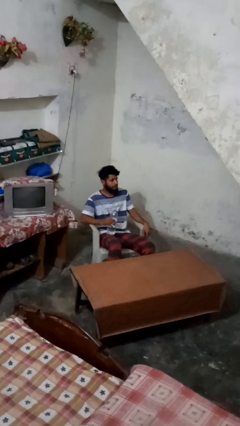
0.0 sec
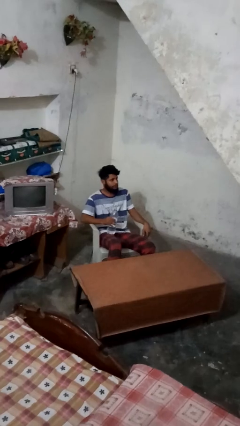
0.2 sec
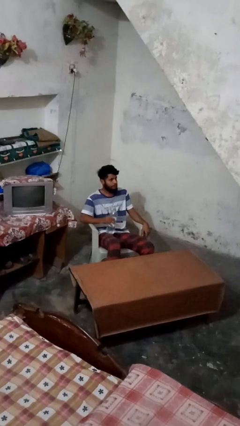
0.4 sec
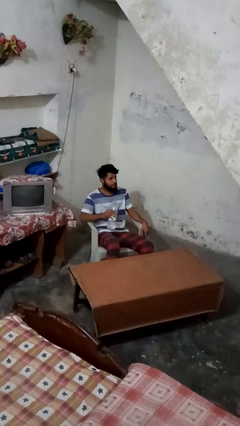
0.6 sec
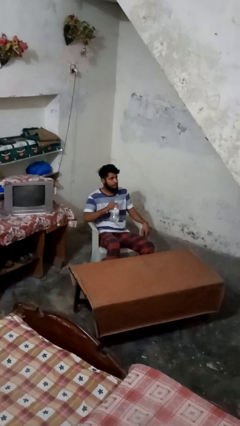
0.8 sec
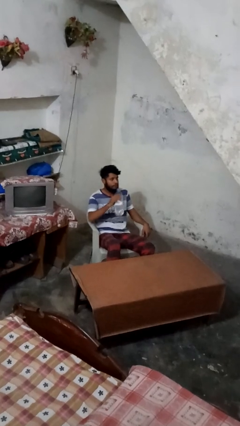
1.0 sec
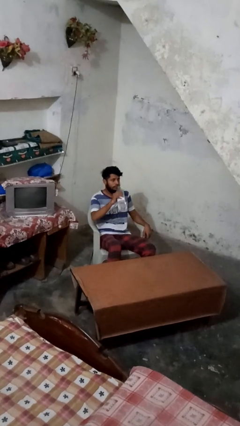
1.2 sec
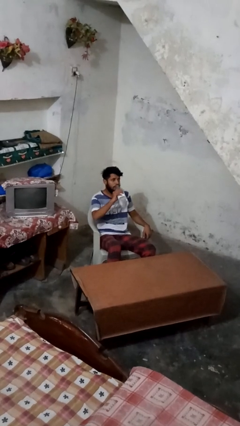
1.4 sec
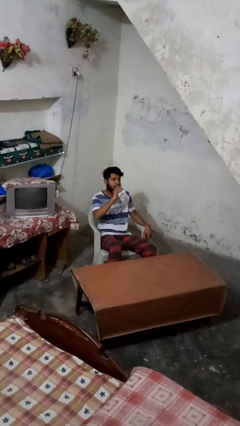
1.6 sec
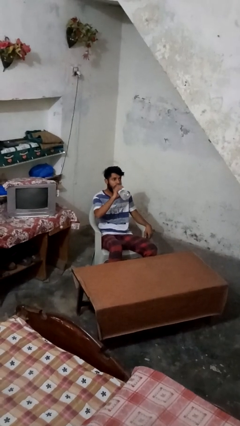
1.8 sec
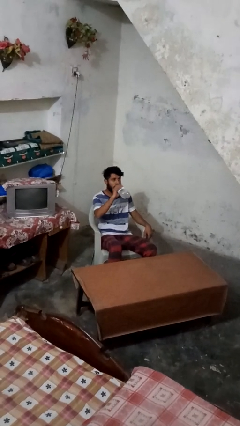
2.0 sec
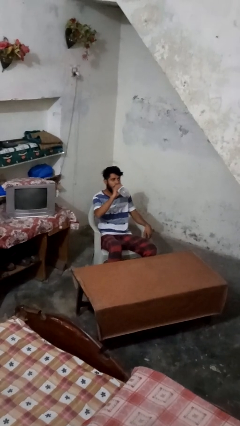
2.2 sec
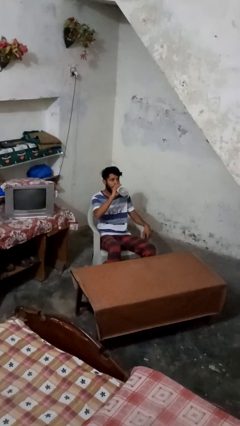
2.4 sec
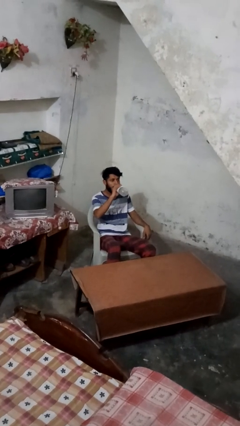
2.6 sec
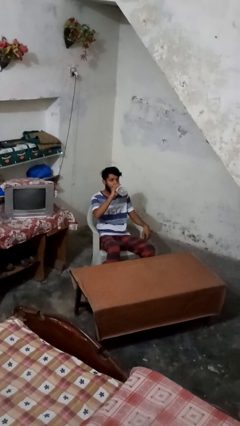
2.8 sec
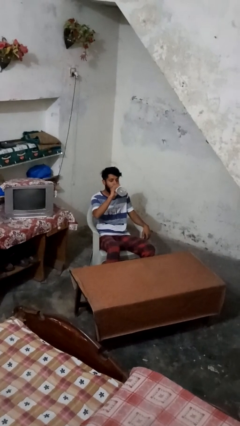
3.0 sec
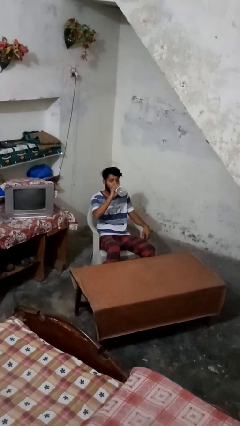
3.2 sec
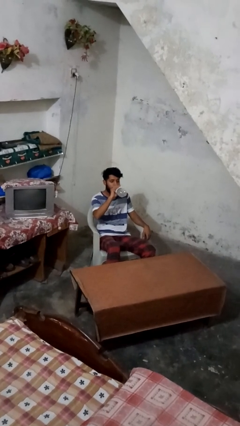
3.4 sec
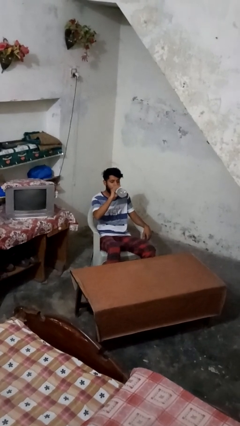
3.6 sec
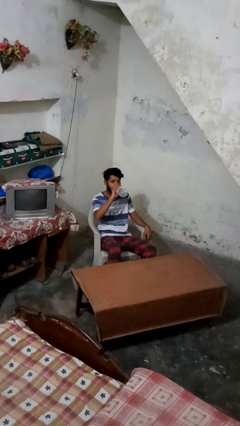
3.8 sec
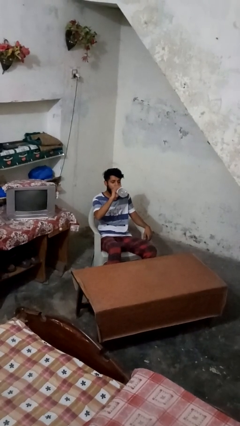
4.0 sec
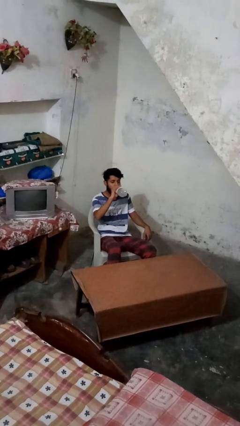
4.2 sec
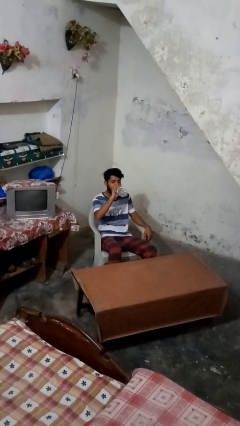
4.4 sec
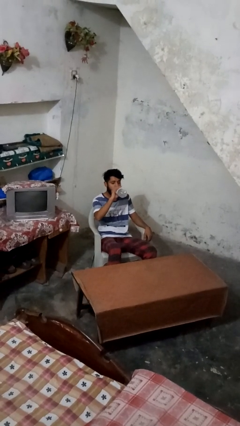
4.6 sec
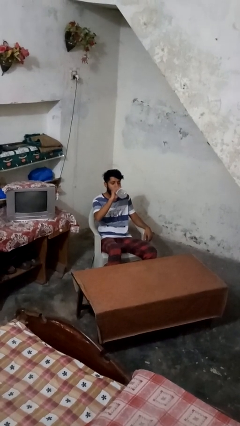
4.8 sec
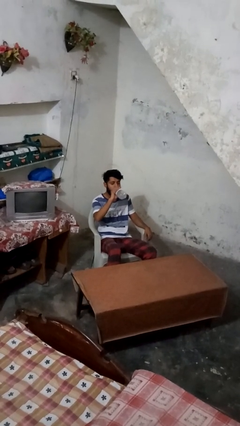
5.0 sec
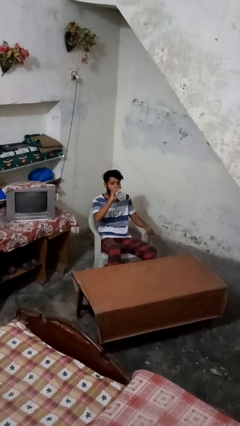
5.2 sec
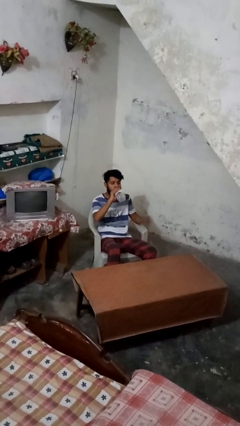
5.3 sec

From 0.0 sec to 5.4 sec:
person drinks from bottle

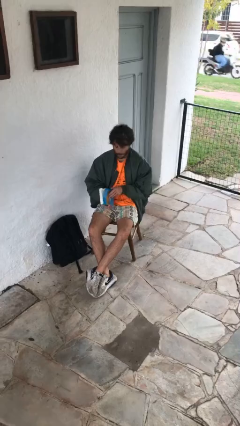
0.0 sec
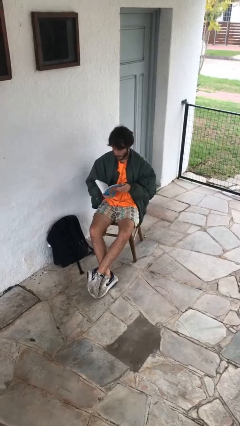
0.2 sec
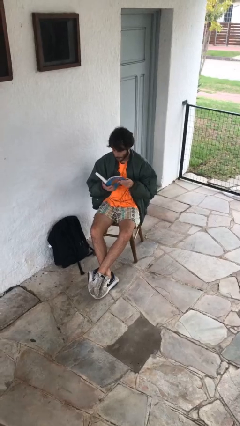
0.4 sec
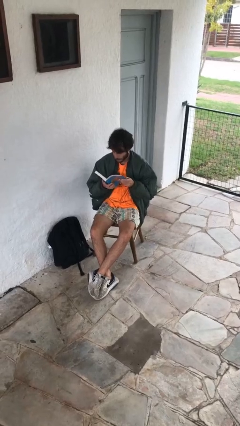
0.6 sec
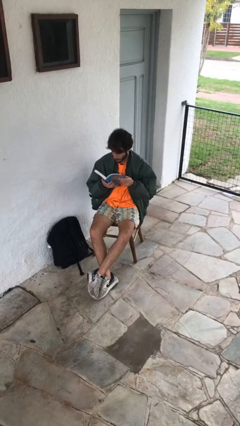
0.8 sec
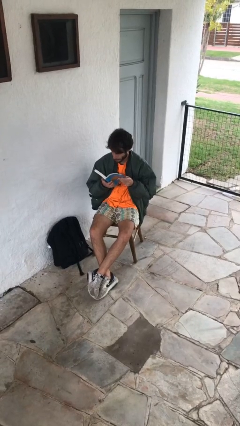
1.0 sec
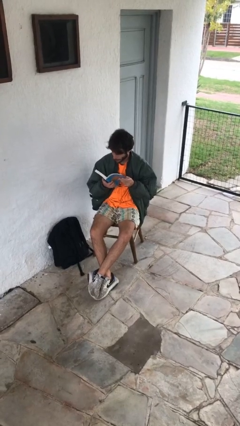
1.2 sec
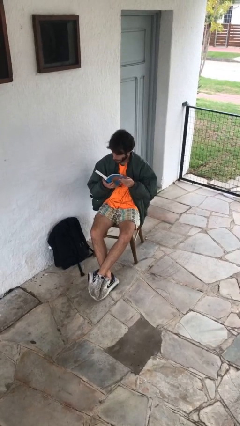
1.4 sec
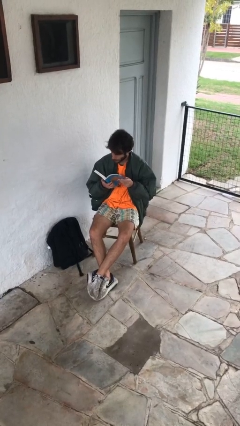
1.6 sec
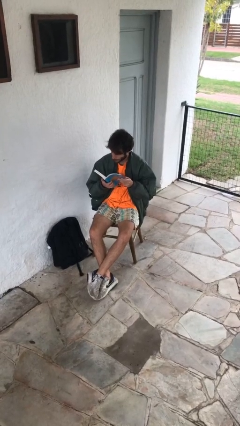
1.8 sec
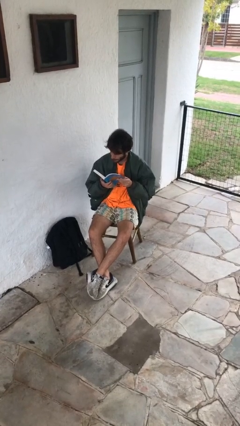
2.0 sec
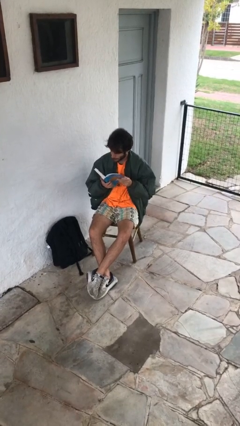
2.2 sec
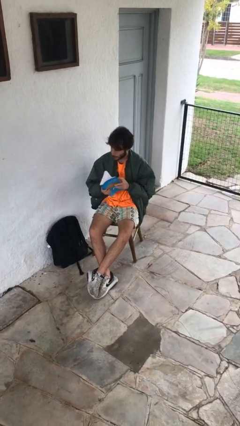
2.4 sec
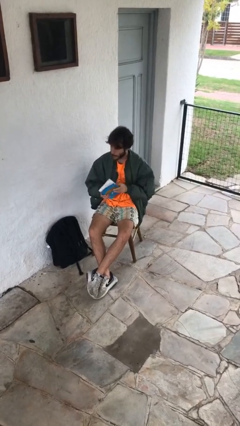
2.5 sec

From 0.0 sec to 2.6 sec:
person reads document

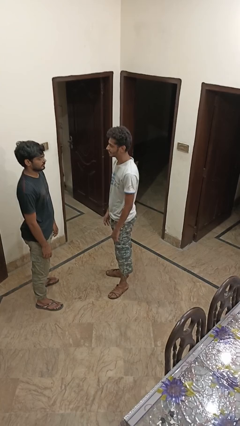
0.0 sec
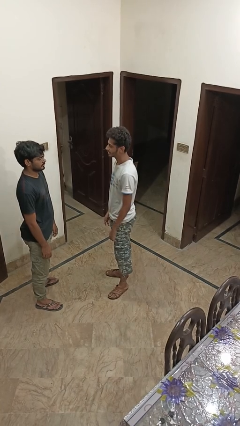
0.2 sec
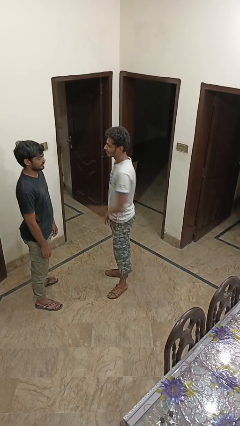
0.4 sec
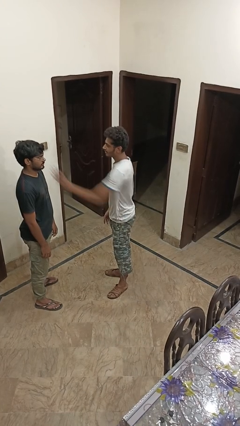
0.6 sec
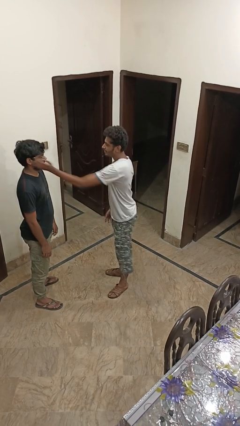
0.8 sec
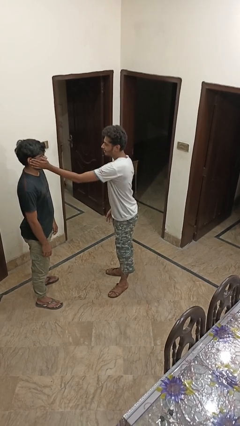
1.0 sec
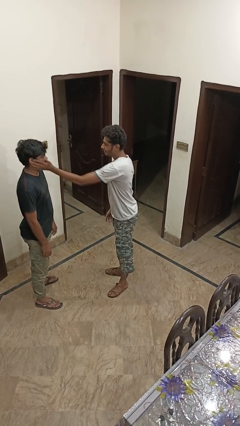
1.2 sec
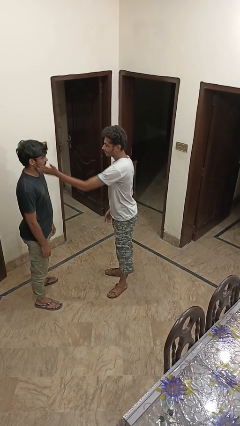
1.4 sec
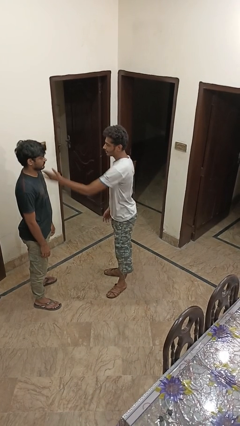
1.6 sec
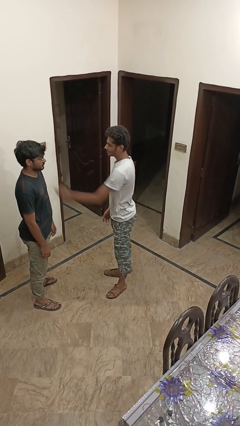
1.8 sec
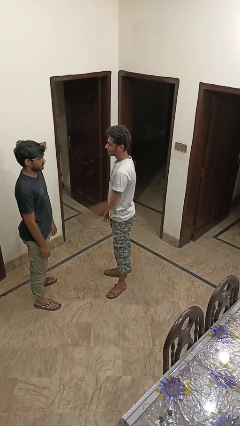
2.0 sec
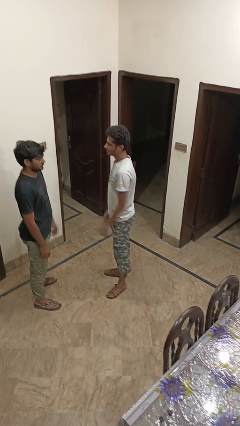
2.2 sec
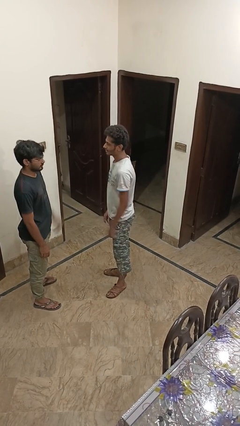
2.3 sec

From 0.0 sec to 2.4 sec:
person touches face of person

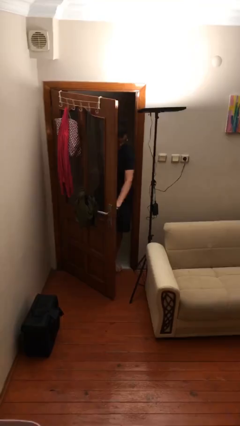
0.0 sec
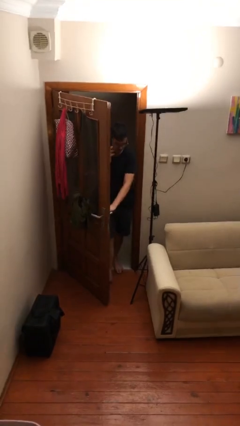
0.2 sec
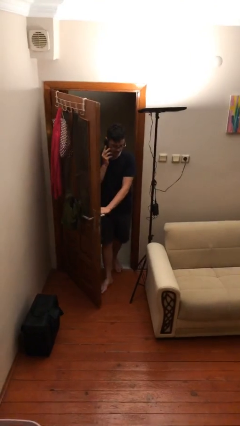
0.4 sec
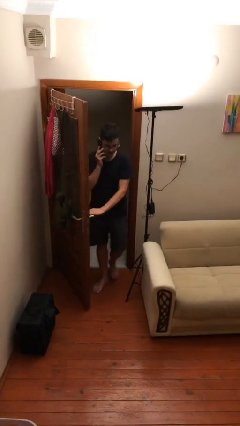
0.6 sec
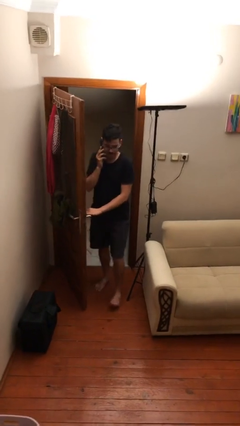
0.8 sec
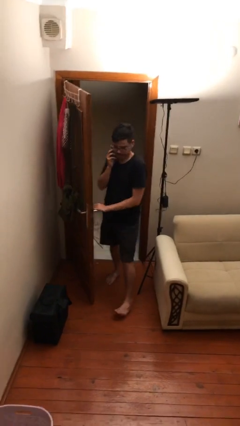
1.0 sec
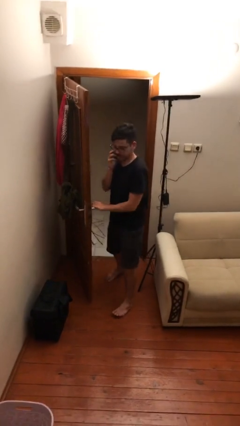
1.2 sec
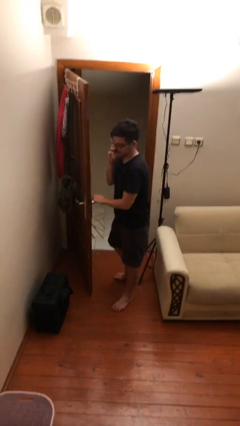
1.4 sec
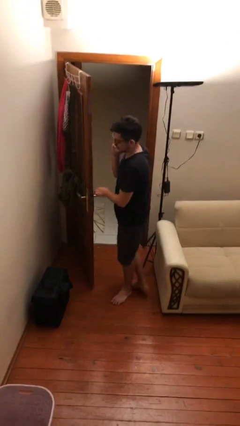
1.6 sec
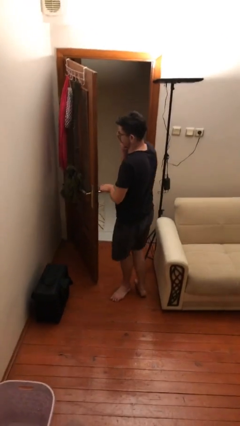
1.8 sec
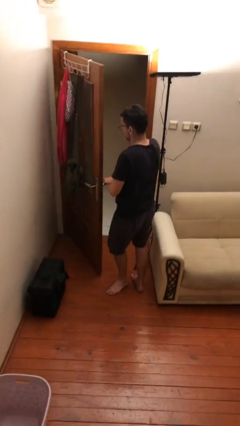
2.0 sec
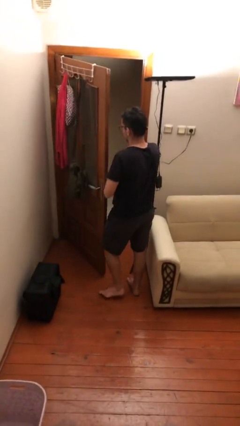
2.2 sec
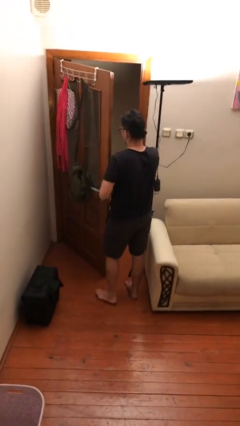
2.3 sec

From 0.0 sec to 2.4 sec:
person enters scene through structure

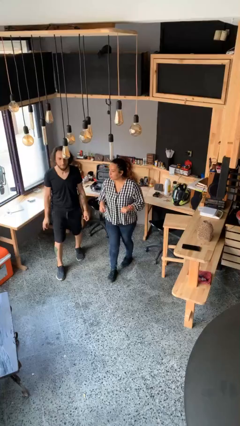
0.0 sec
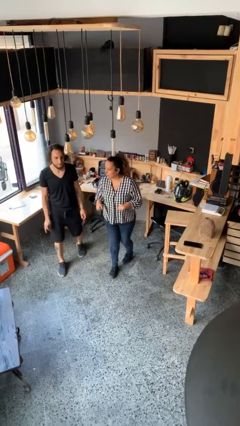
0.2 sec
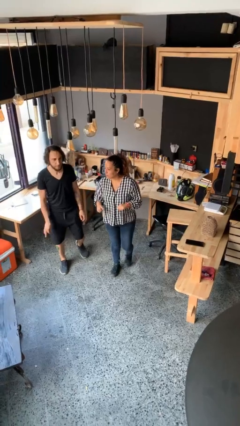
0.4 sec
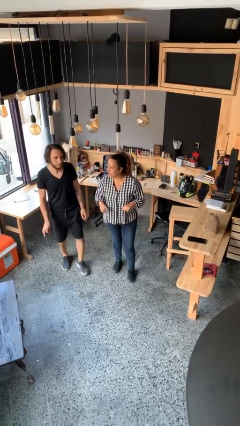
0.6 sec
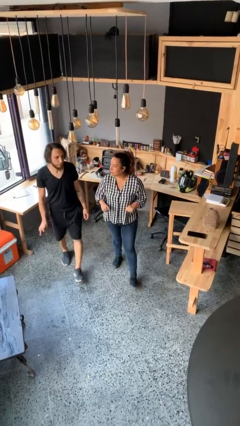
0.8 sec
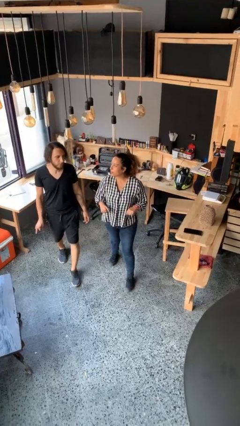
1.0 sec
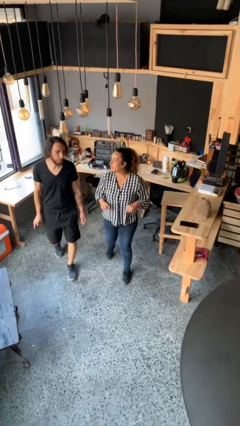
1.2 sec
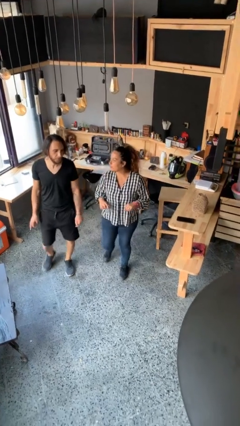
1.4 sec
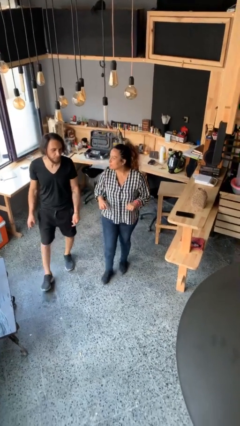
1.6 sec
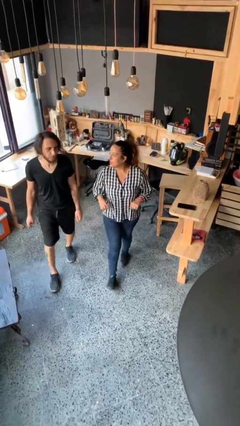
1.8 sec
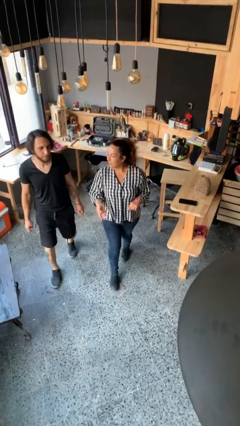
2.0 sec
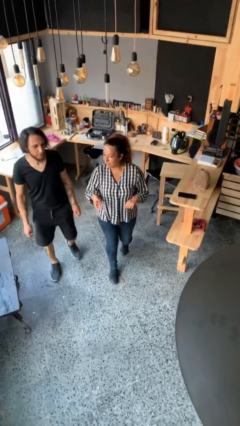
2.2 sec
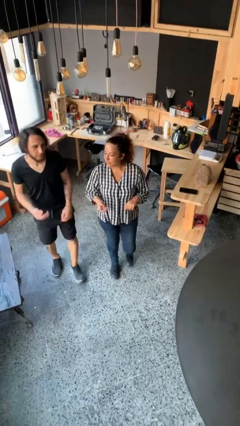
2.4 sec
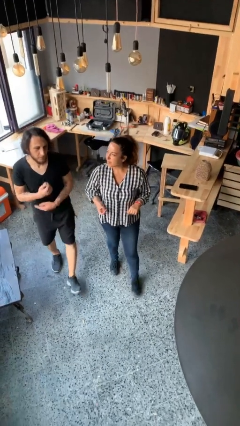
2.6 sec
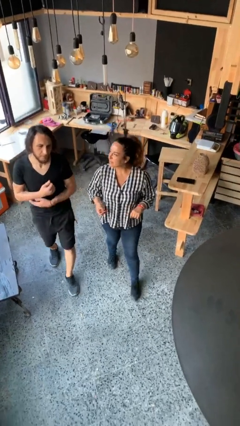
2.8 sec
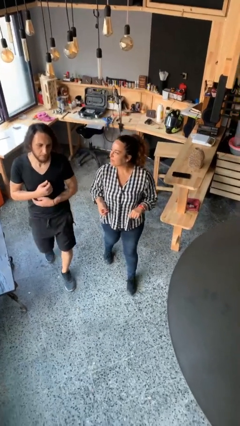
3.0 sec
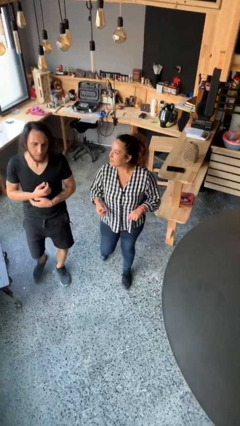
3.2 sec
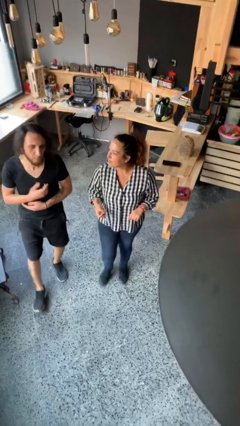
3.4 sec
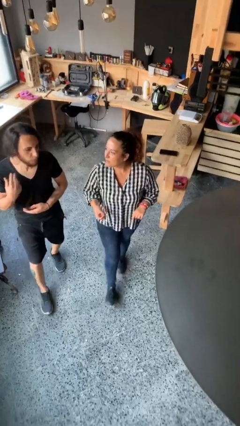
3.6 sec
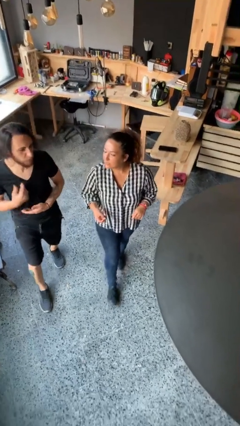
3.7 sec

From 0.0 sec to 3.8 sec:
person talks to person

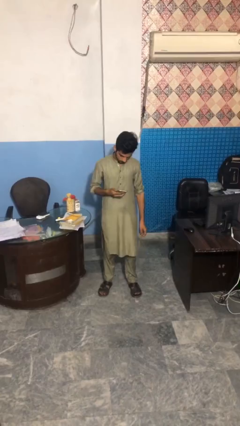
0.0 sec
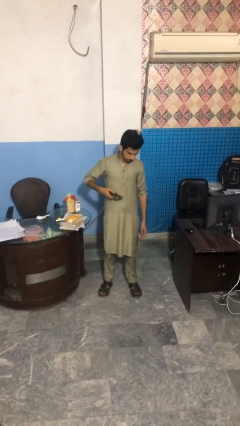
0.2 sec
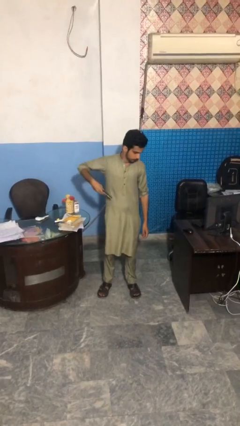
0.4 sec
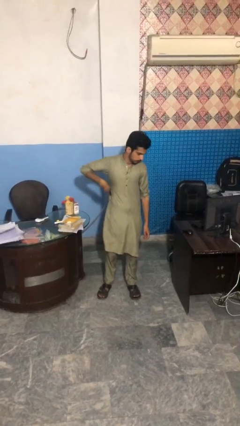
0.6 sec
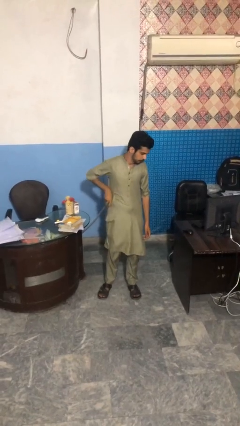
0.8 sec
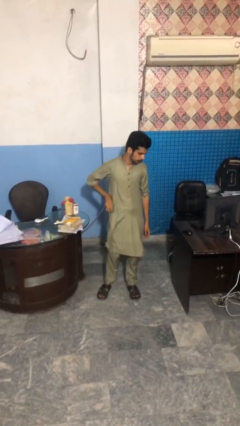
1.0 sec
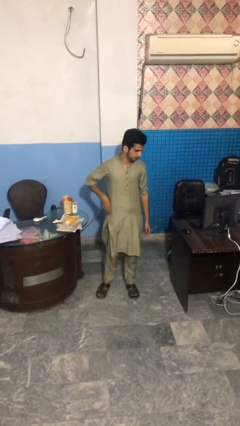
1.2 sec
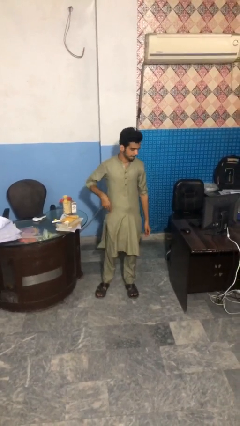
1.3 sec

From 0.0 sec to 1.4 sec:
person puts phone into pocket
